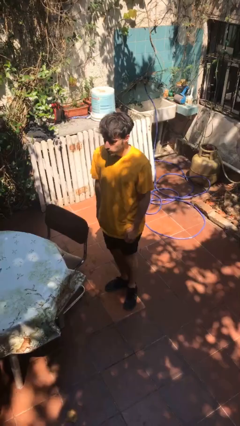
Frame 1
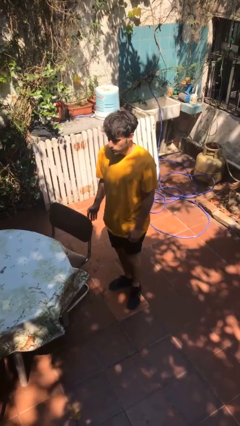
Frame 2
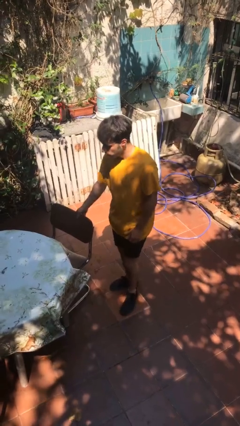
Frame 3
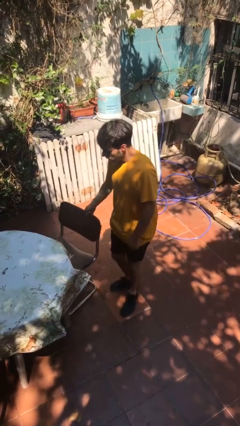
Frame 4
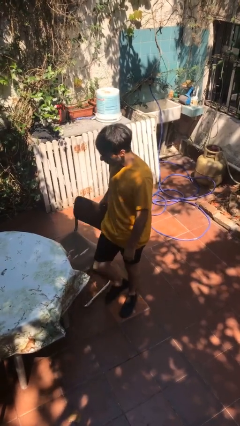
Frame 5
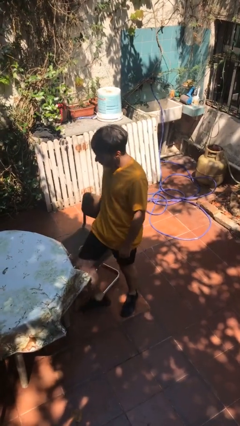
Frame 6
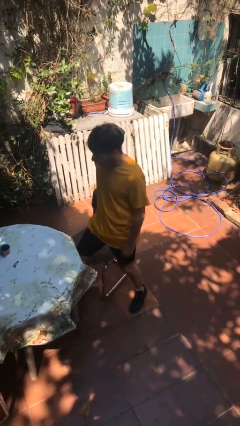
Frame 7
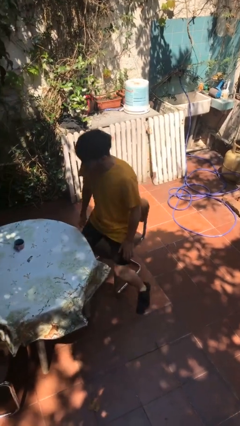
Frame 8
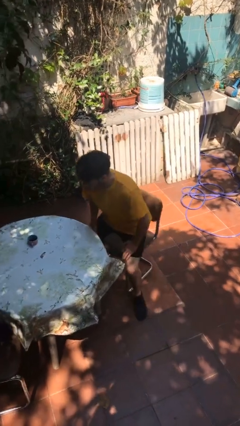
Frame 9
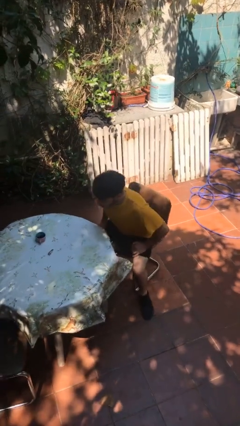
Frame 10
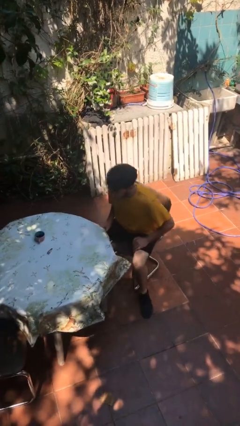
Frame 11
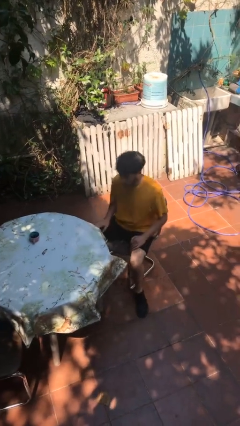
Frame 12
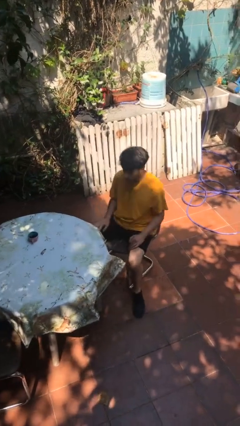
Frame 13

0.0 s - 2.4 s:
person sits down

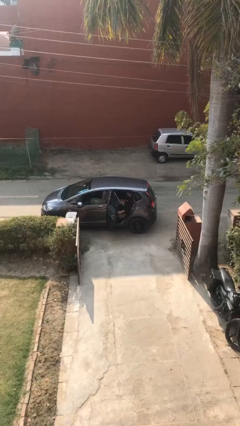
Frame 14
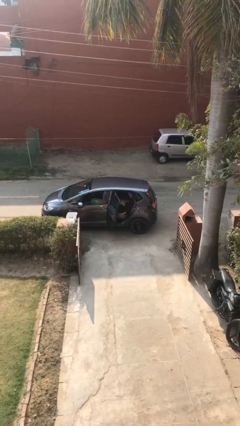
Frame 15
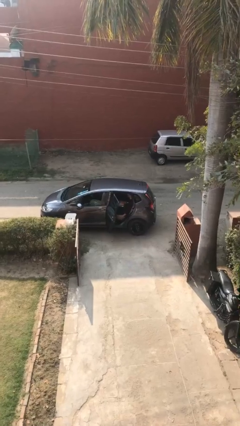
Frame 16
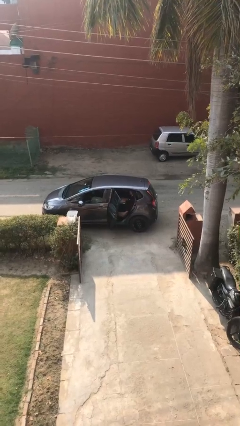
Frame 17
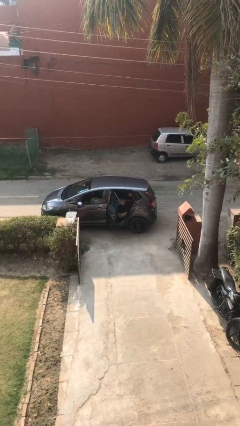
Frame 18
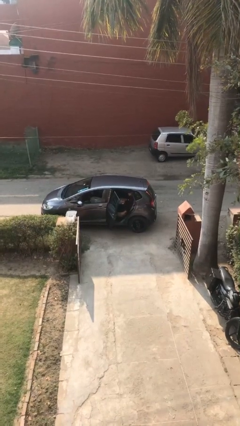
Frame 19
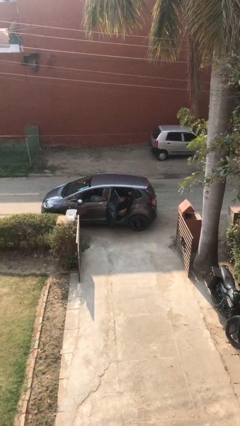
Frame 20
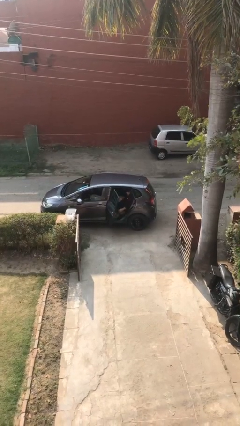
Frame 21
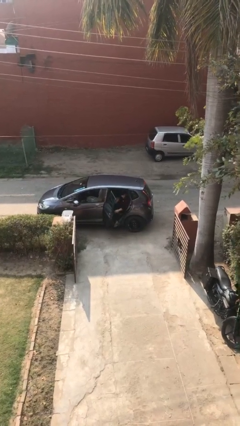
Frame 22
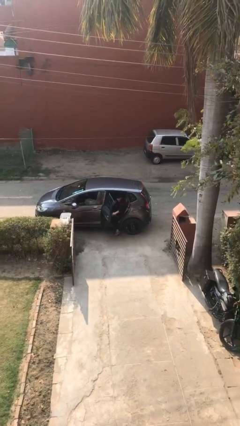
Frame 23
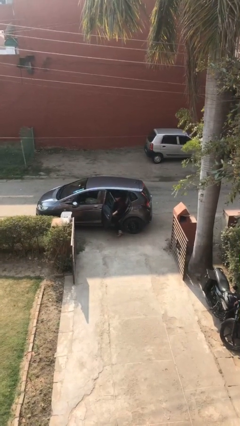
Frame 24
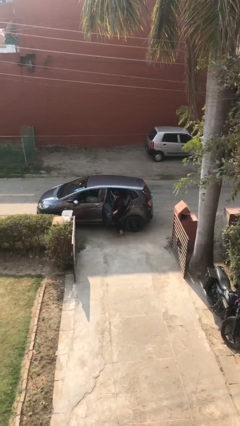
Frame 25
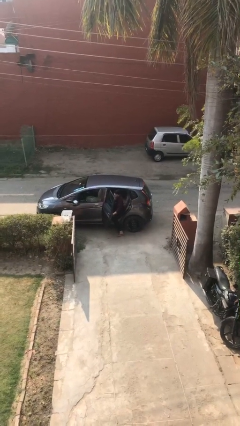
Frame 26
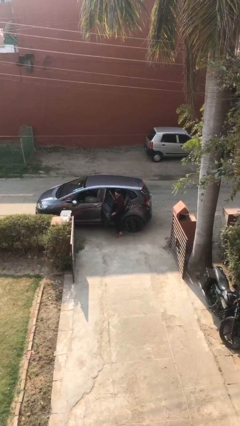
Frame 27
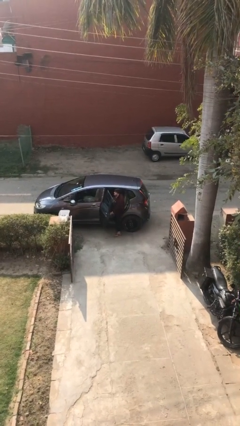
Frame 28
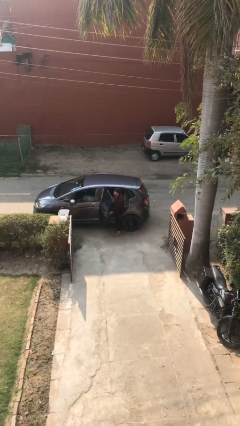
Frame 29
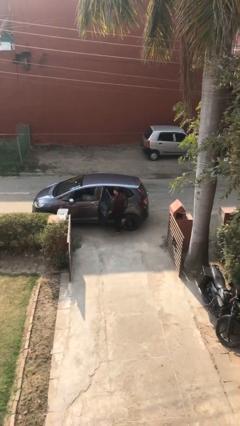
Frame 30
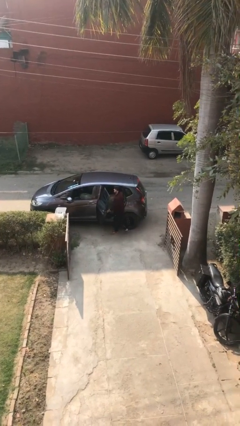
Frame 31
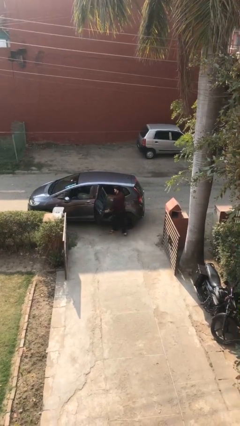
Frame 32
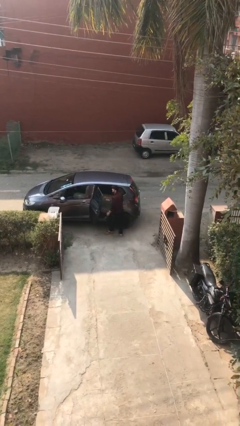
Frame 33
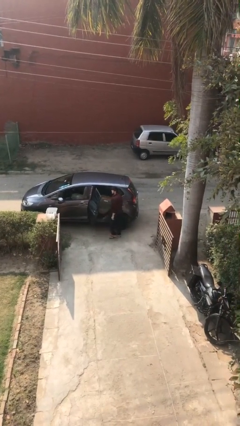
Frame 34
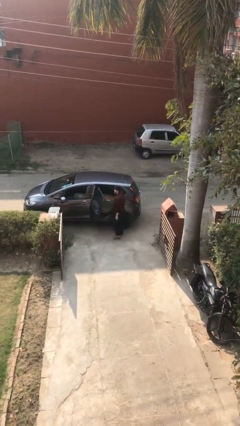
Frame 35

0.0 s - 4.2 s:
person exits car

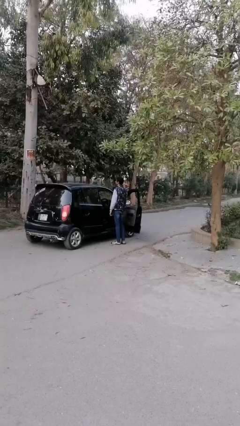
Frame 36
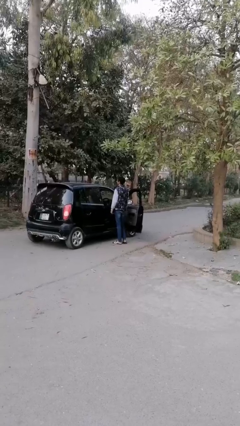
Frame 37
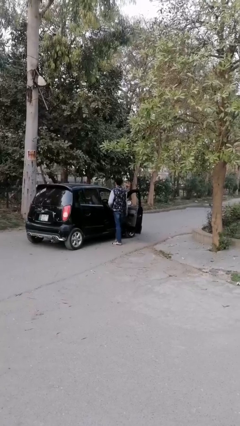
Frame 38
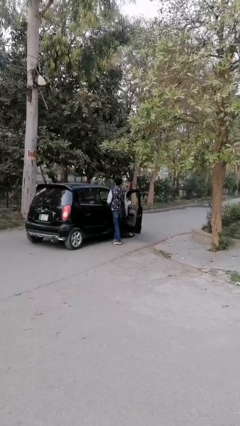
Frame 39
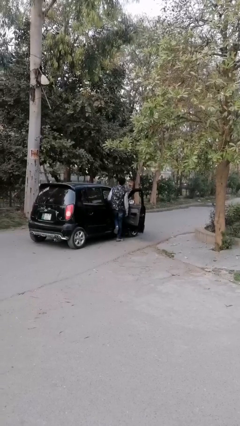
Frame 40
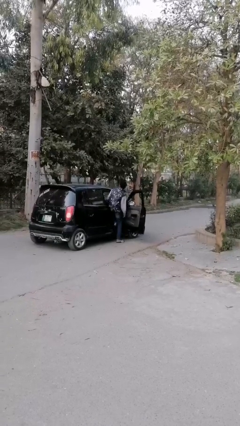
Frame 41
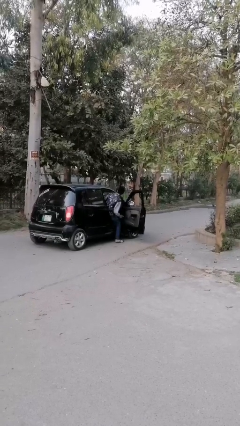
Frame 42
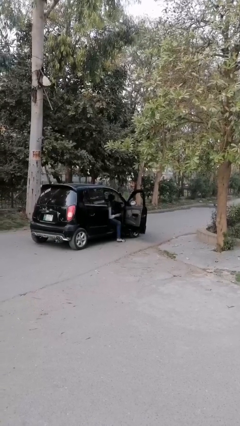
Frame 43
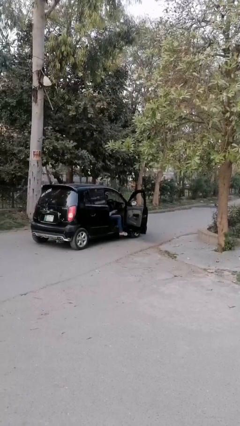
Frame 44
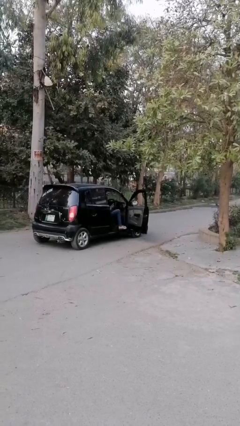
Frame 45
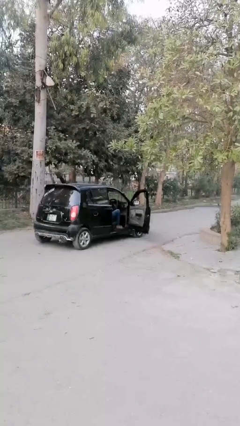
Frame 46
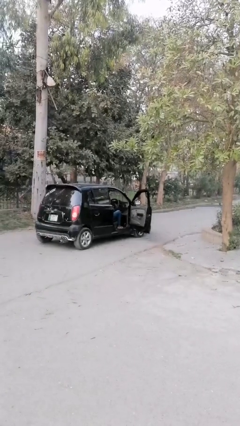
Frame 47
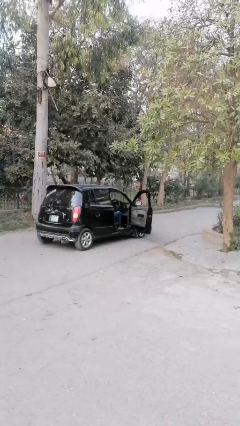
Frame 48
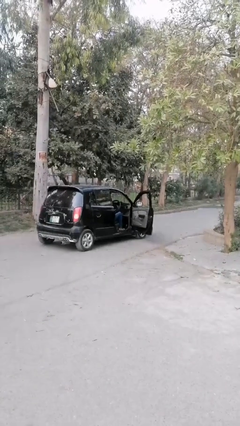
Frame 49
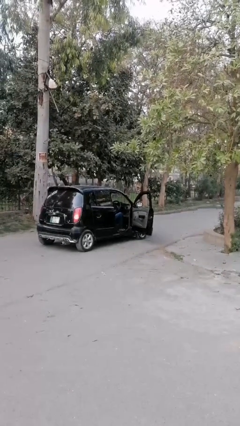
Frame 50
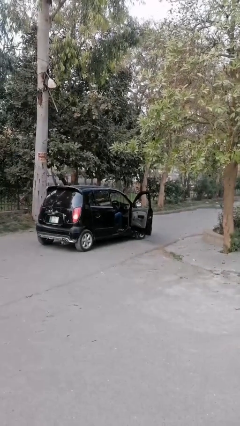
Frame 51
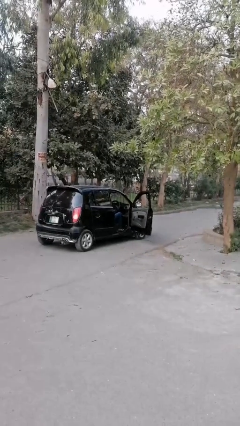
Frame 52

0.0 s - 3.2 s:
person enters car

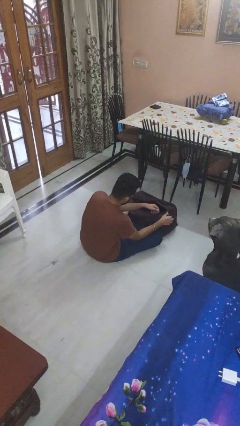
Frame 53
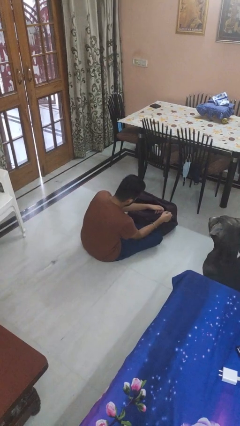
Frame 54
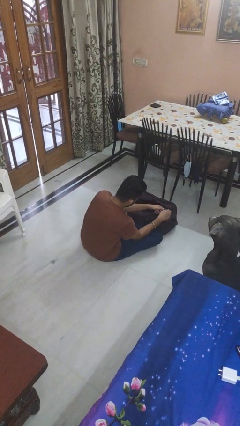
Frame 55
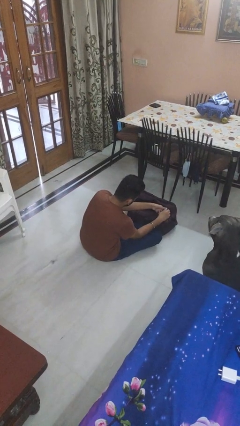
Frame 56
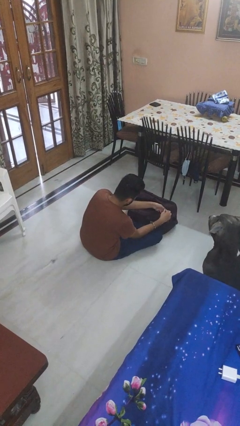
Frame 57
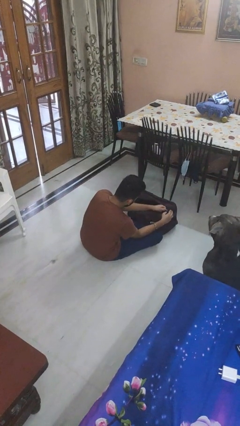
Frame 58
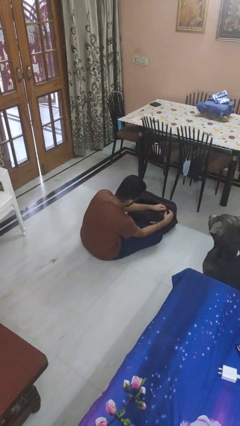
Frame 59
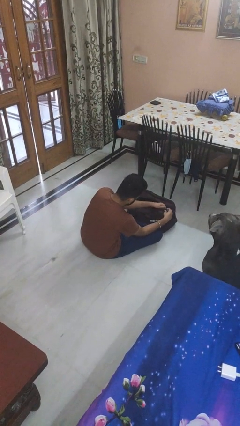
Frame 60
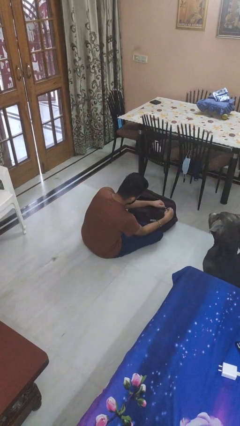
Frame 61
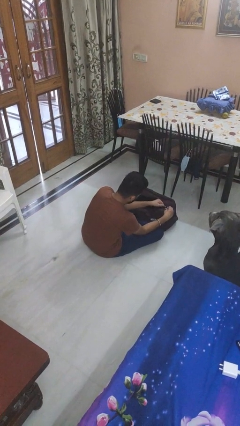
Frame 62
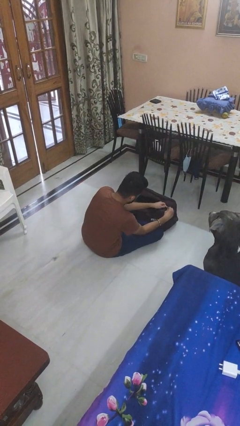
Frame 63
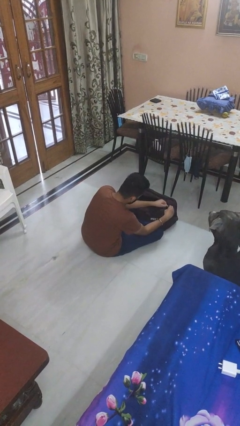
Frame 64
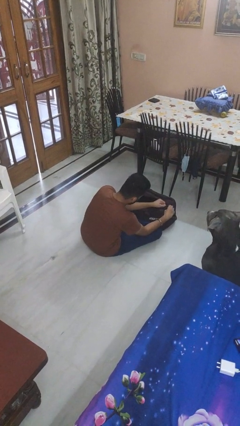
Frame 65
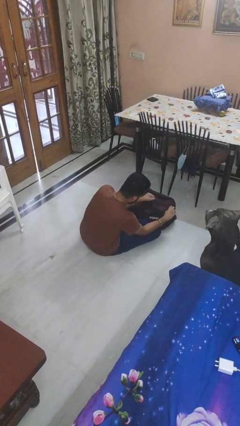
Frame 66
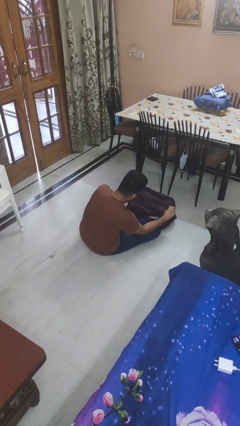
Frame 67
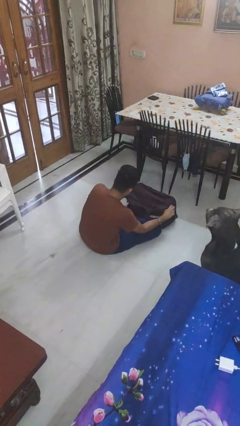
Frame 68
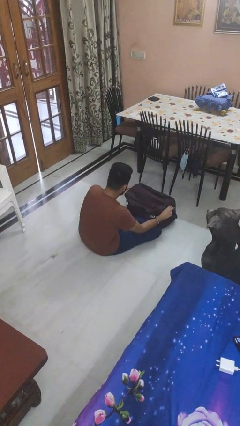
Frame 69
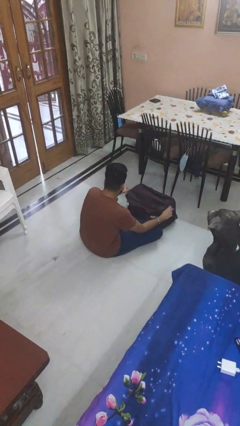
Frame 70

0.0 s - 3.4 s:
person closes suitcase

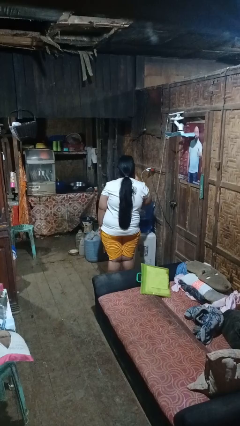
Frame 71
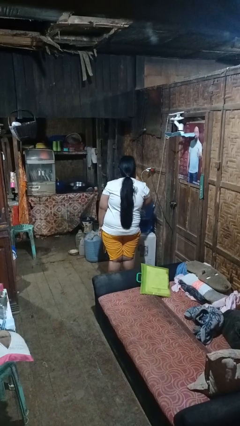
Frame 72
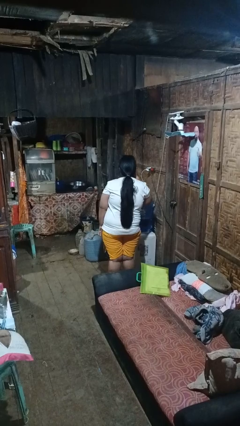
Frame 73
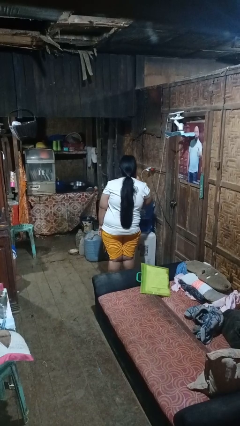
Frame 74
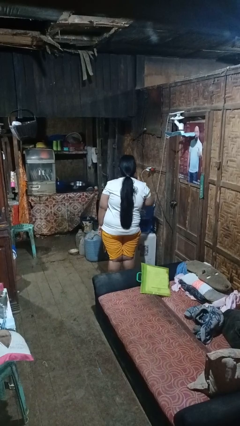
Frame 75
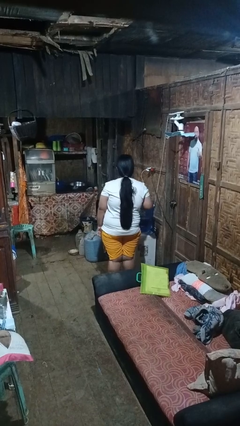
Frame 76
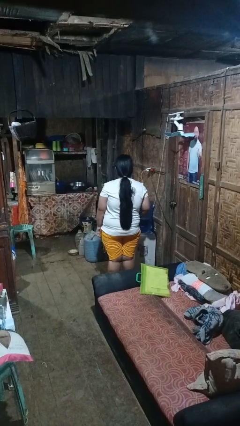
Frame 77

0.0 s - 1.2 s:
person gestures listen closely

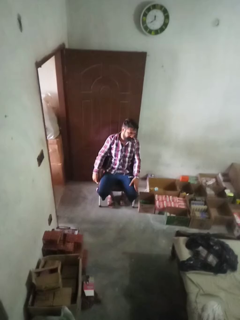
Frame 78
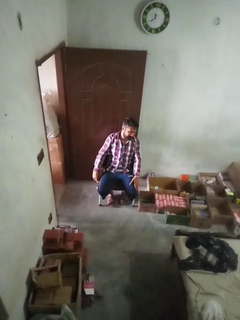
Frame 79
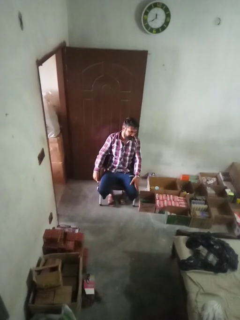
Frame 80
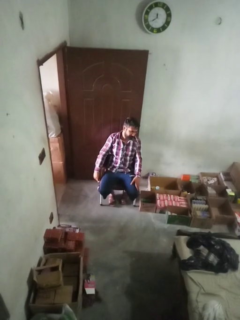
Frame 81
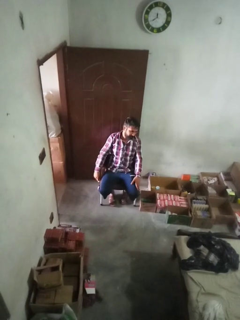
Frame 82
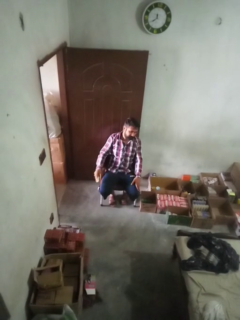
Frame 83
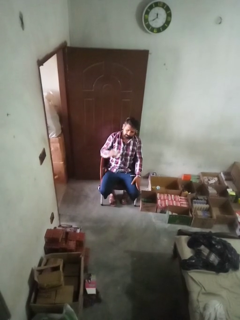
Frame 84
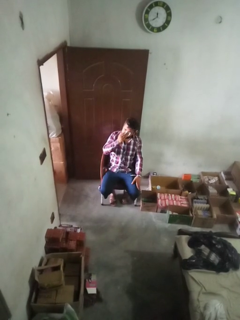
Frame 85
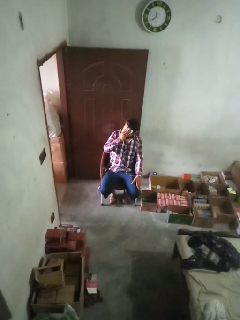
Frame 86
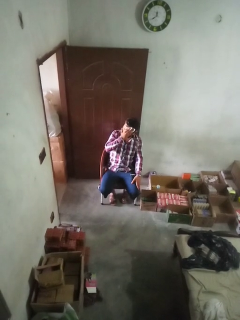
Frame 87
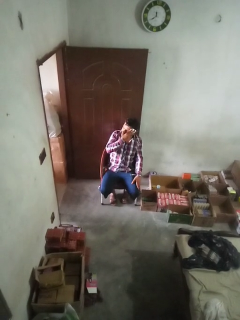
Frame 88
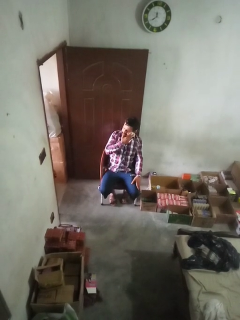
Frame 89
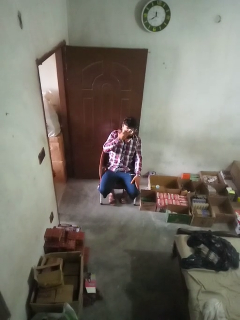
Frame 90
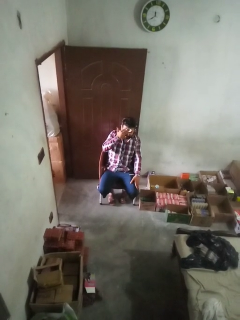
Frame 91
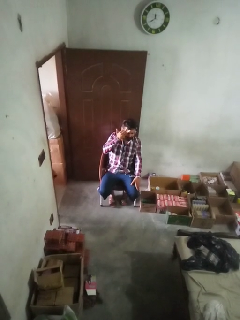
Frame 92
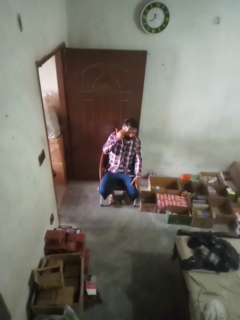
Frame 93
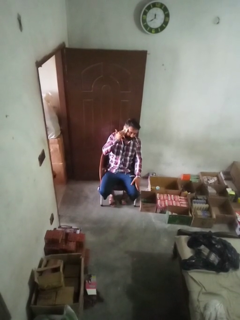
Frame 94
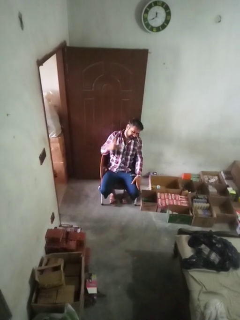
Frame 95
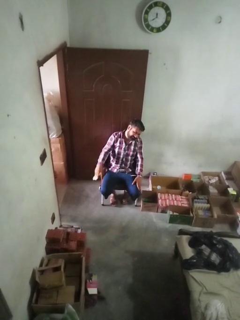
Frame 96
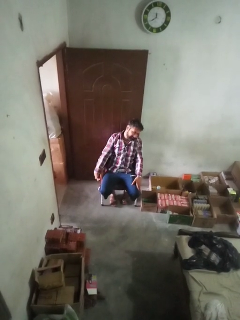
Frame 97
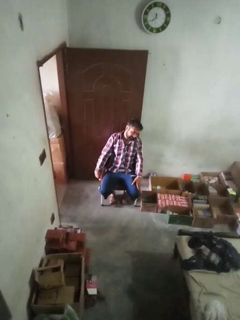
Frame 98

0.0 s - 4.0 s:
person wipes mouth with napkin

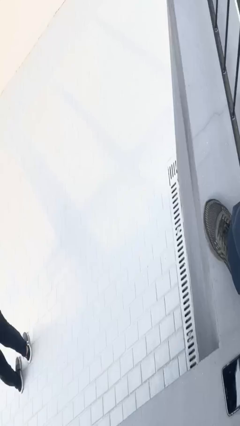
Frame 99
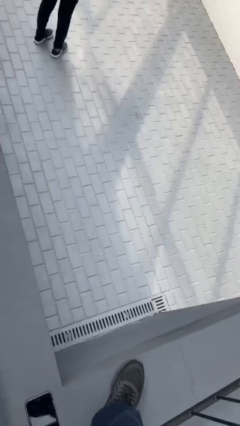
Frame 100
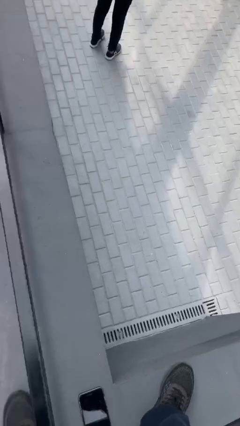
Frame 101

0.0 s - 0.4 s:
person puts on facemask
